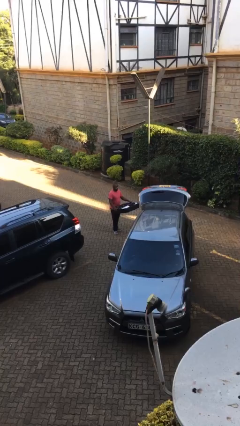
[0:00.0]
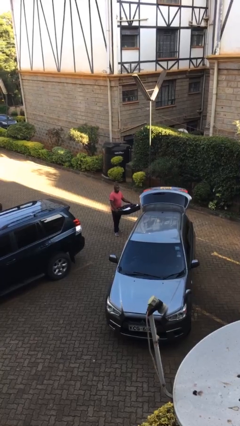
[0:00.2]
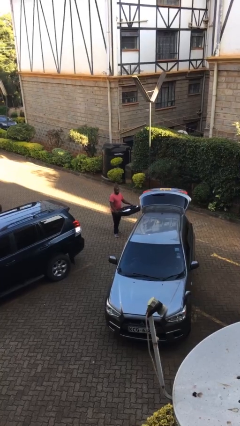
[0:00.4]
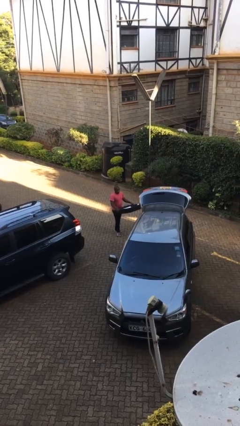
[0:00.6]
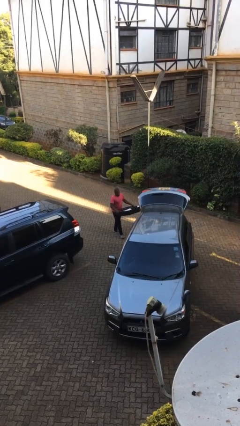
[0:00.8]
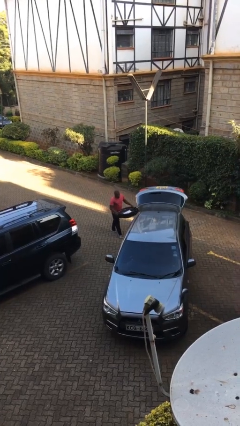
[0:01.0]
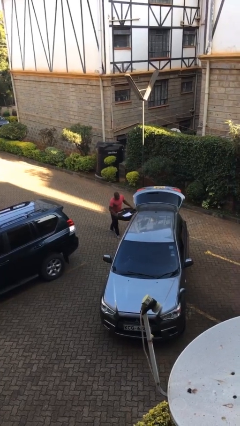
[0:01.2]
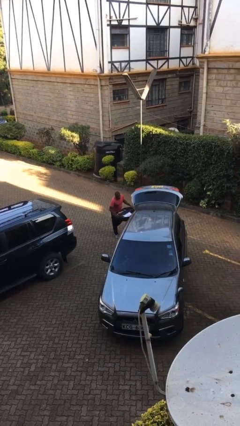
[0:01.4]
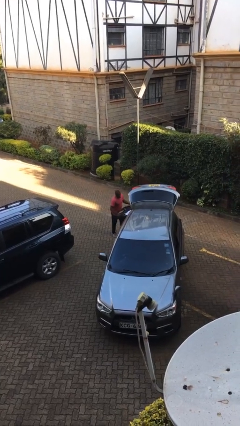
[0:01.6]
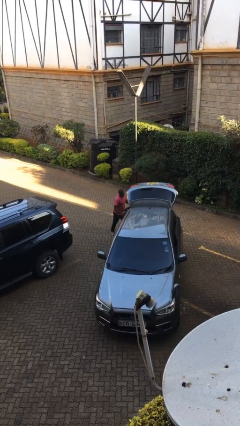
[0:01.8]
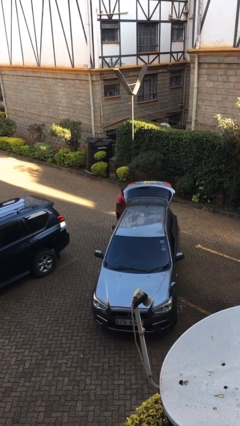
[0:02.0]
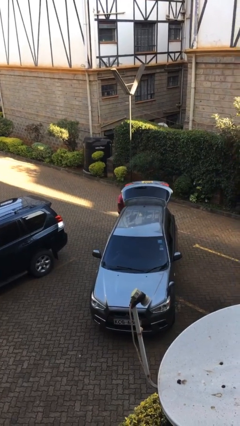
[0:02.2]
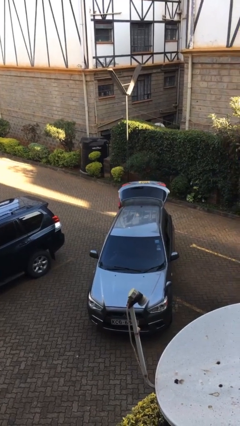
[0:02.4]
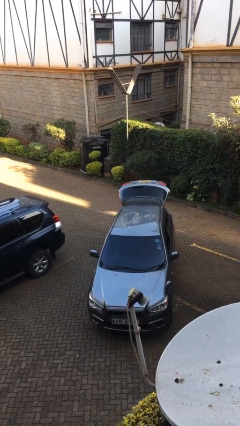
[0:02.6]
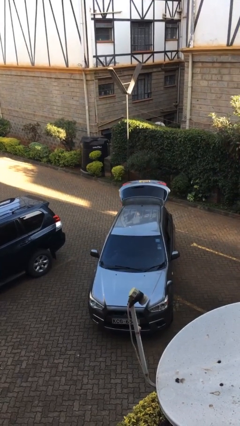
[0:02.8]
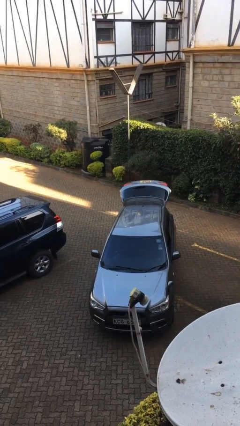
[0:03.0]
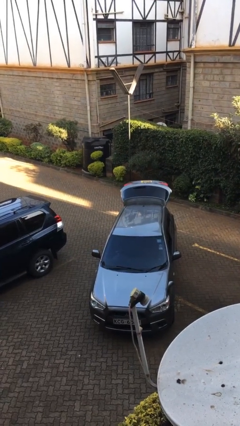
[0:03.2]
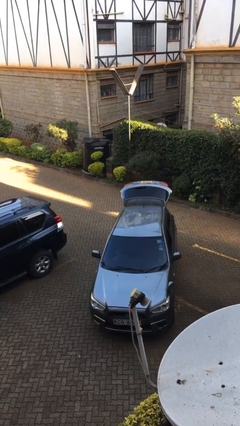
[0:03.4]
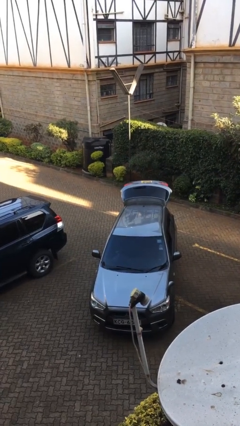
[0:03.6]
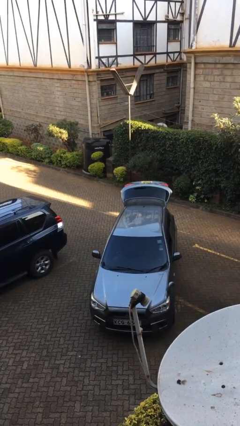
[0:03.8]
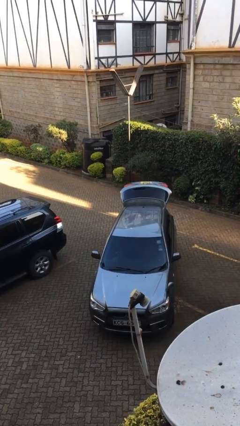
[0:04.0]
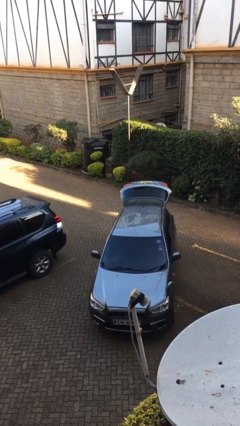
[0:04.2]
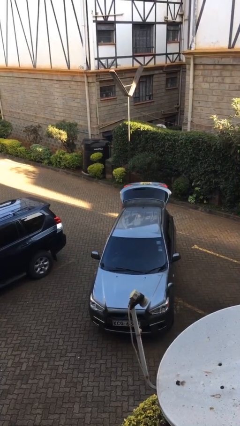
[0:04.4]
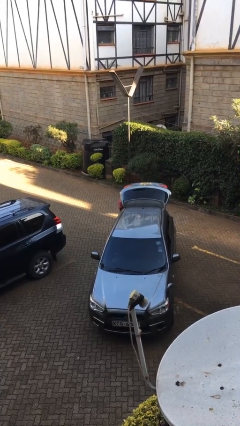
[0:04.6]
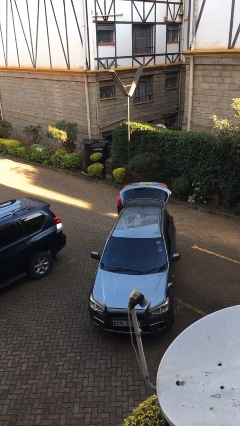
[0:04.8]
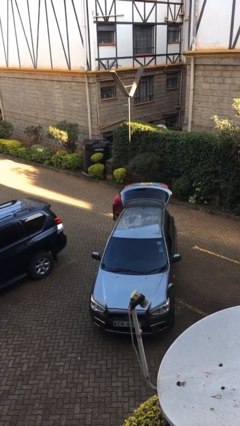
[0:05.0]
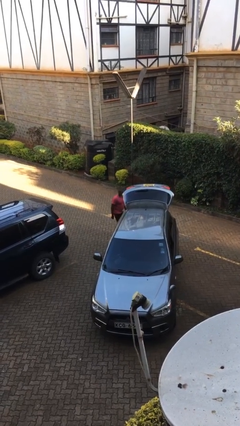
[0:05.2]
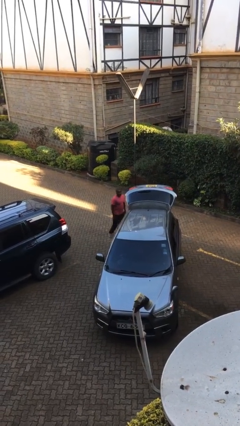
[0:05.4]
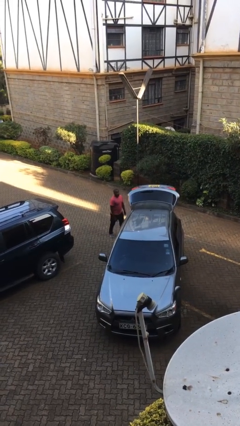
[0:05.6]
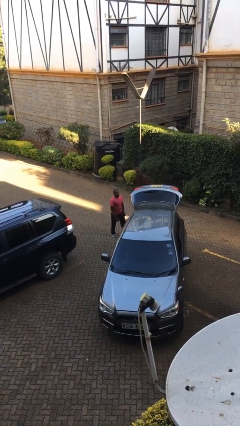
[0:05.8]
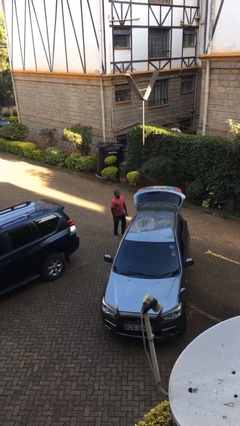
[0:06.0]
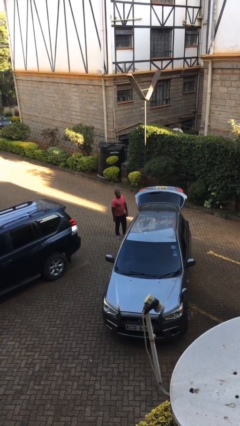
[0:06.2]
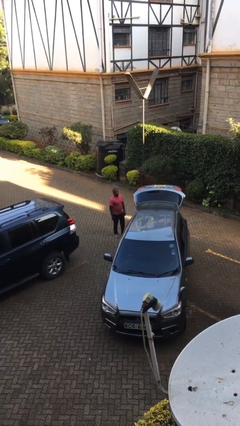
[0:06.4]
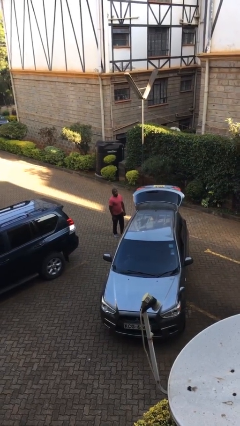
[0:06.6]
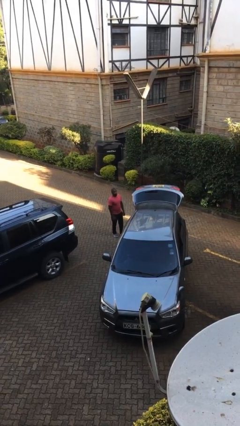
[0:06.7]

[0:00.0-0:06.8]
person loads car

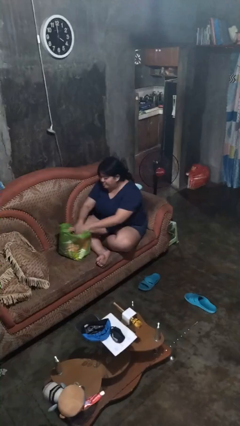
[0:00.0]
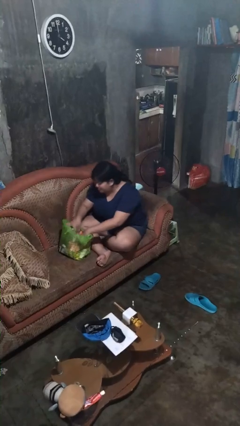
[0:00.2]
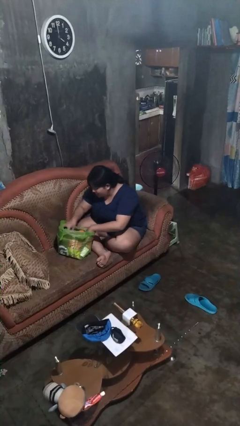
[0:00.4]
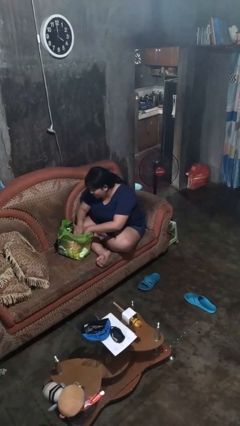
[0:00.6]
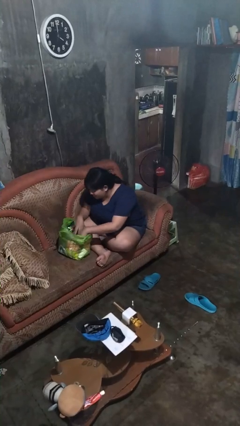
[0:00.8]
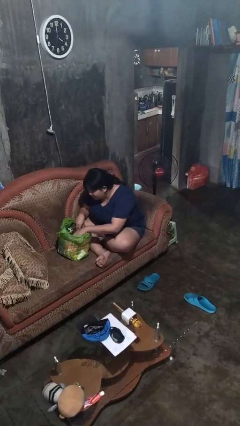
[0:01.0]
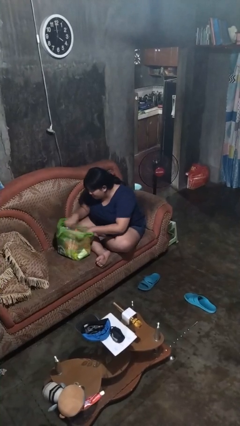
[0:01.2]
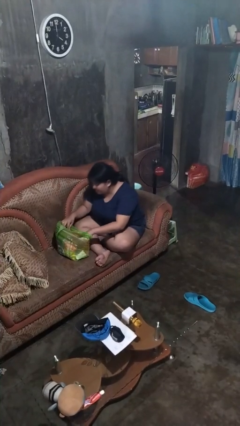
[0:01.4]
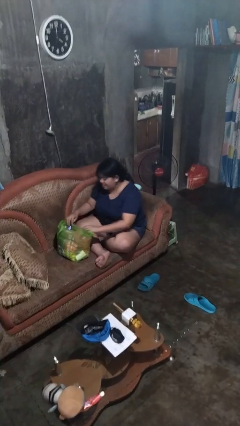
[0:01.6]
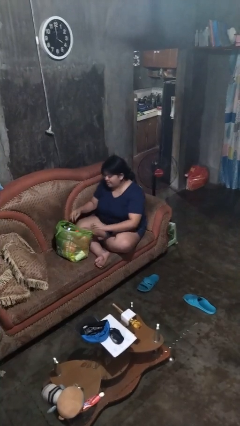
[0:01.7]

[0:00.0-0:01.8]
person searches in bag

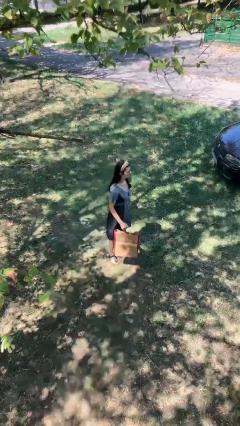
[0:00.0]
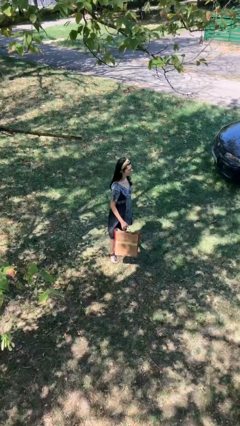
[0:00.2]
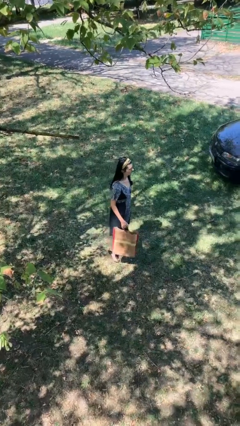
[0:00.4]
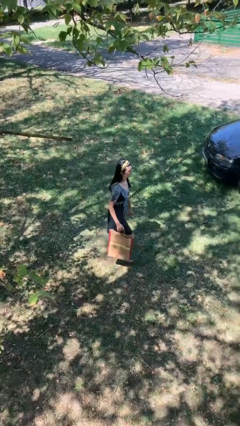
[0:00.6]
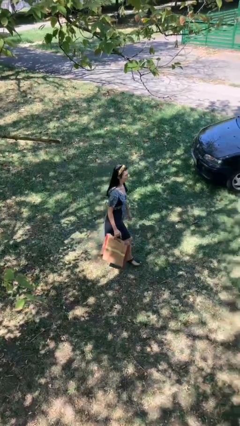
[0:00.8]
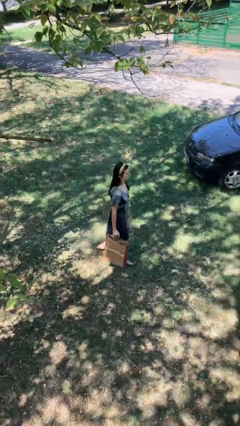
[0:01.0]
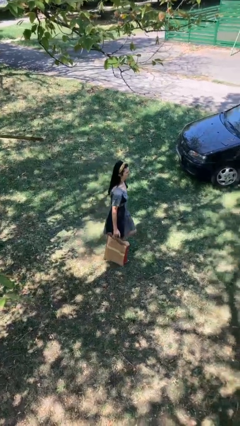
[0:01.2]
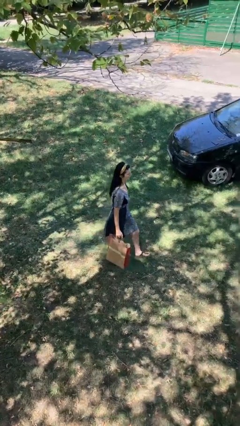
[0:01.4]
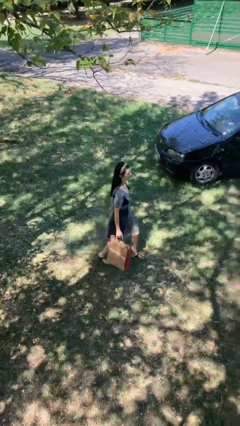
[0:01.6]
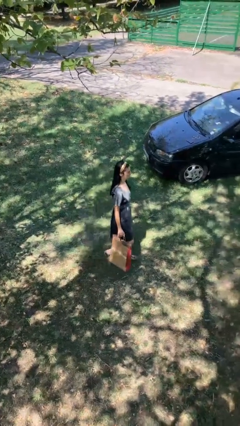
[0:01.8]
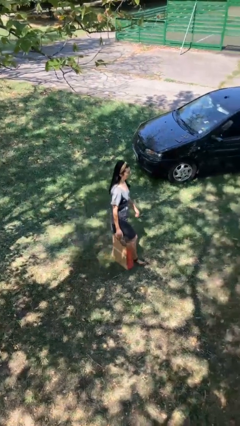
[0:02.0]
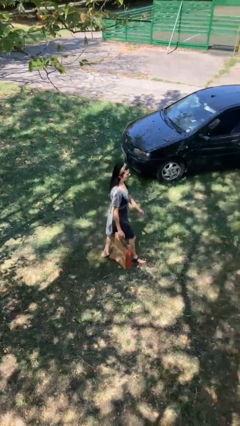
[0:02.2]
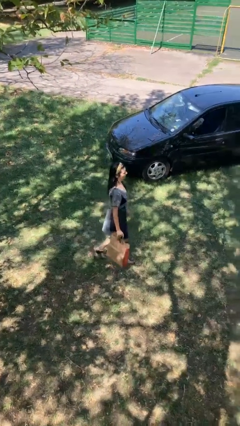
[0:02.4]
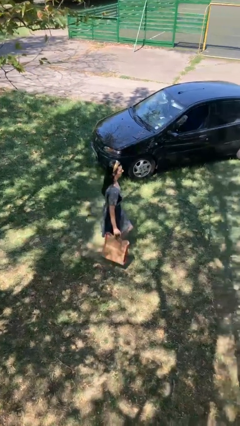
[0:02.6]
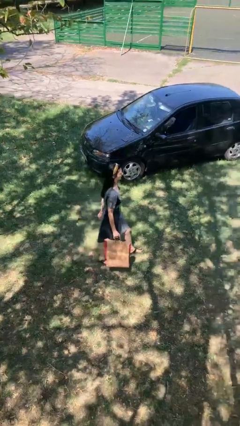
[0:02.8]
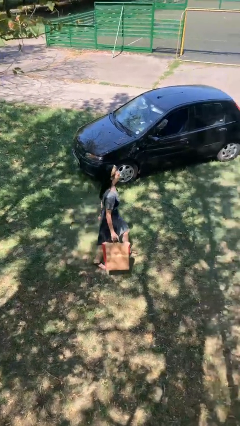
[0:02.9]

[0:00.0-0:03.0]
person carries groceries

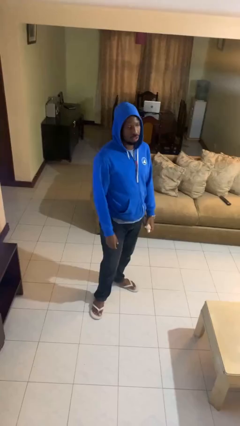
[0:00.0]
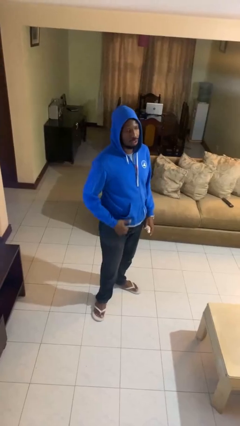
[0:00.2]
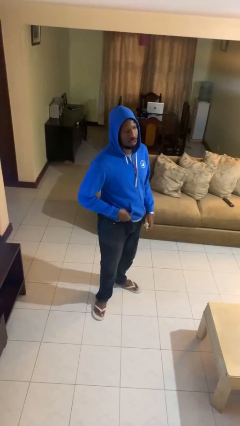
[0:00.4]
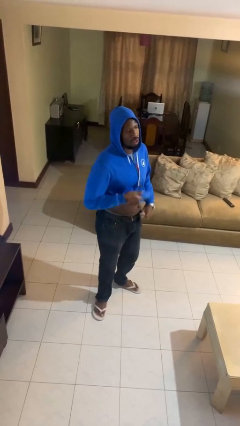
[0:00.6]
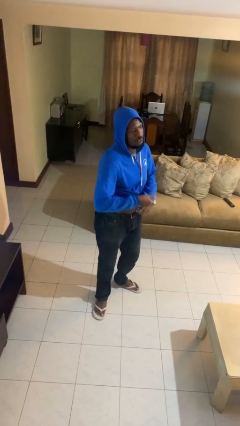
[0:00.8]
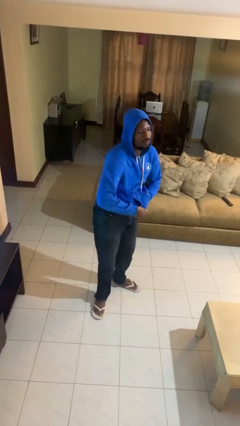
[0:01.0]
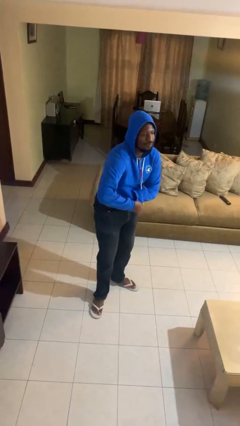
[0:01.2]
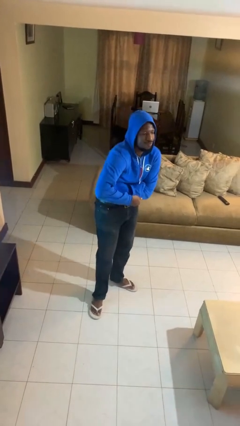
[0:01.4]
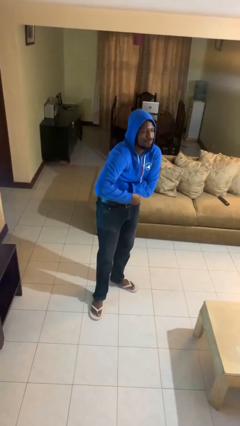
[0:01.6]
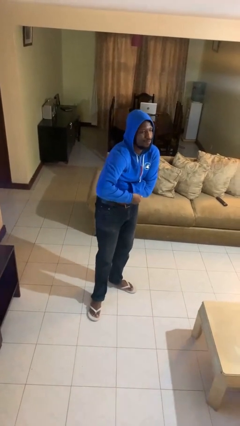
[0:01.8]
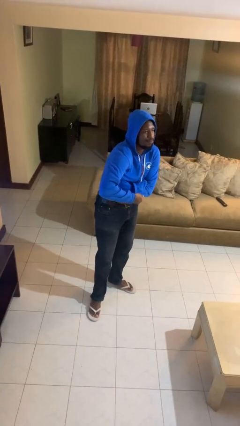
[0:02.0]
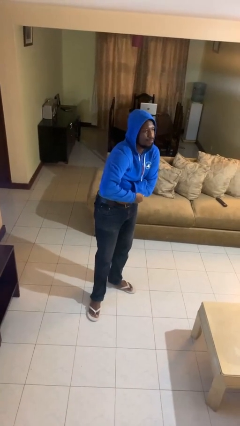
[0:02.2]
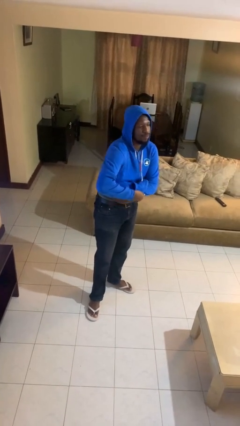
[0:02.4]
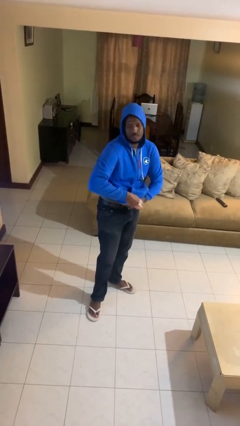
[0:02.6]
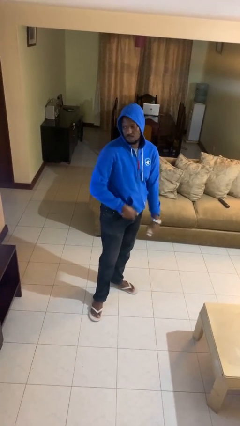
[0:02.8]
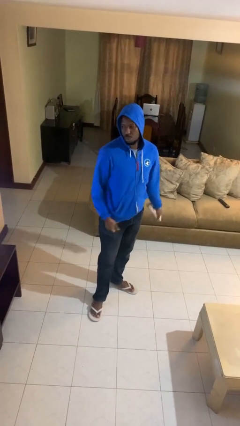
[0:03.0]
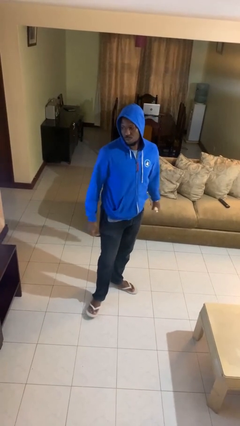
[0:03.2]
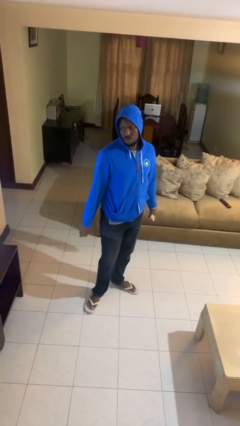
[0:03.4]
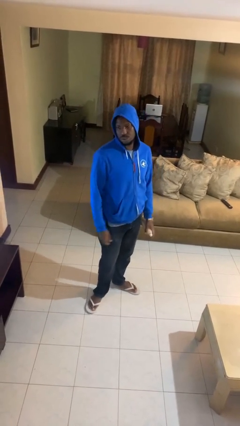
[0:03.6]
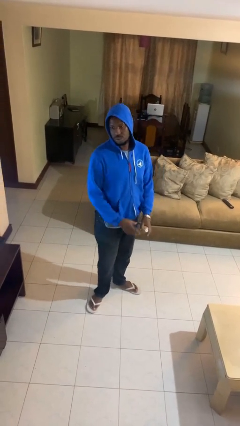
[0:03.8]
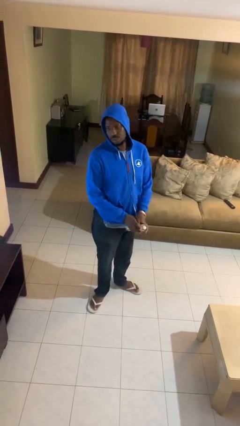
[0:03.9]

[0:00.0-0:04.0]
person applies deodorant

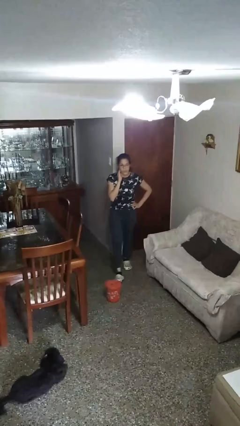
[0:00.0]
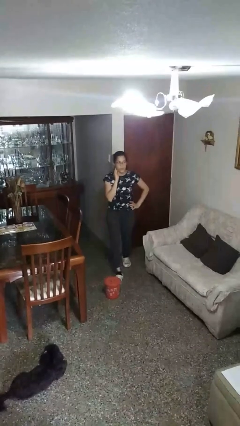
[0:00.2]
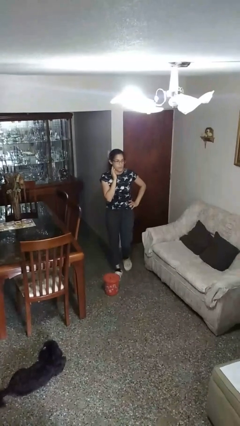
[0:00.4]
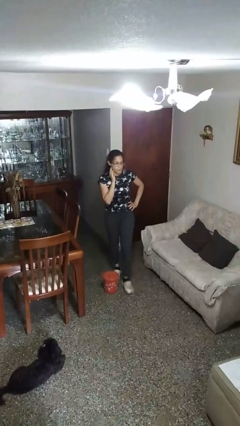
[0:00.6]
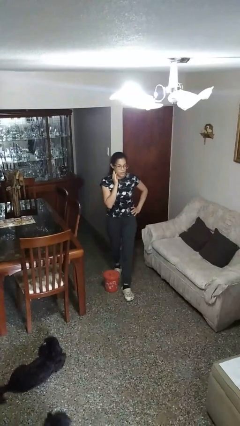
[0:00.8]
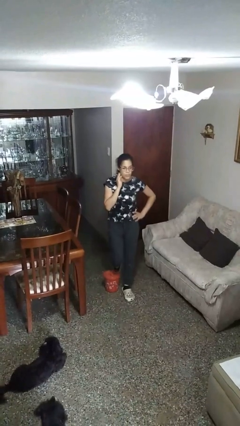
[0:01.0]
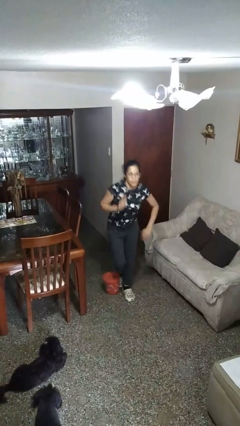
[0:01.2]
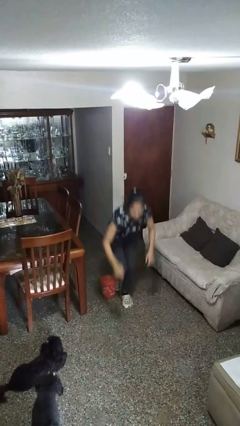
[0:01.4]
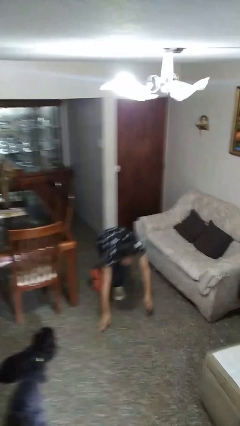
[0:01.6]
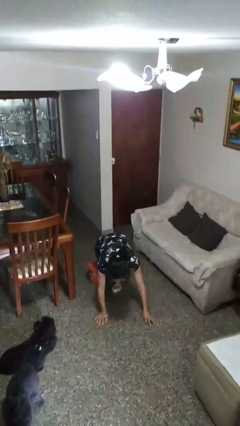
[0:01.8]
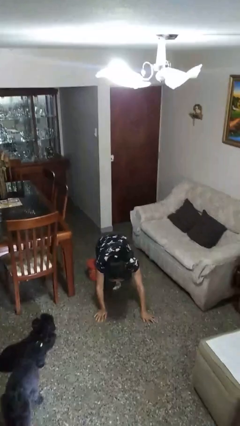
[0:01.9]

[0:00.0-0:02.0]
person trips on object on floor

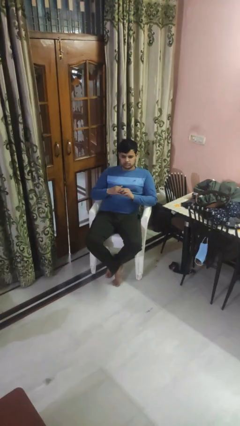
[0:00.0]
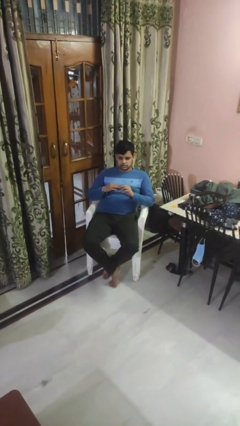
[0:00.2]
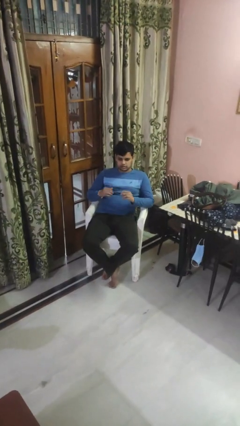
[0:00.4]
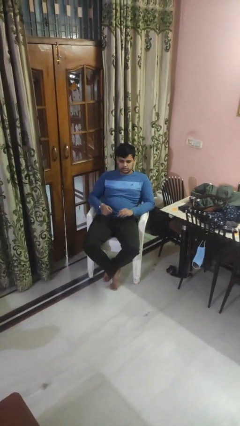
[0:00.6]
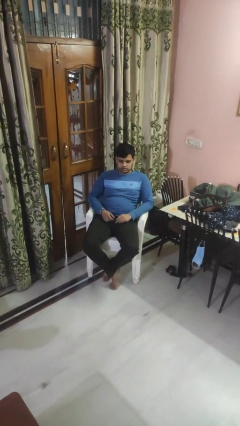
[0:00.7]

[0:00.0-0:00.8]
person takes off ring
